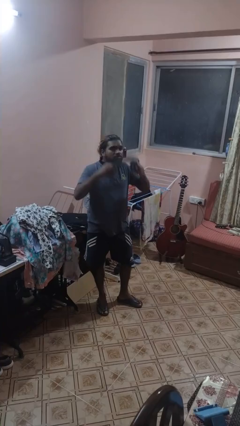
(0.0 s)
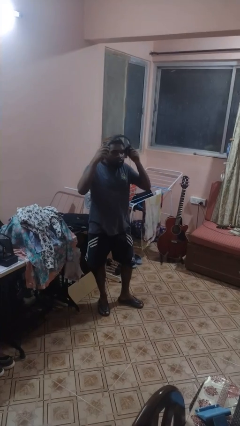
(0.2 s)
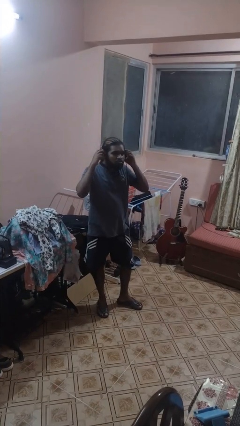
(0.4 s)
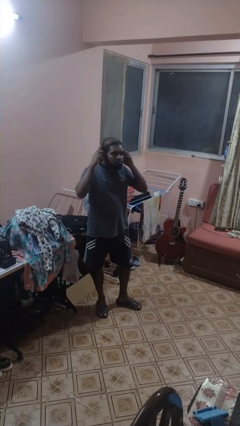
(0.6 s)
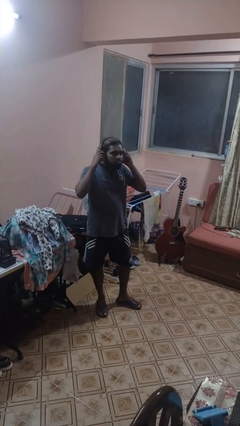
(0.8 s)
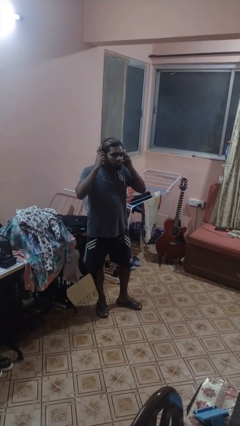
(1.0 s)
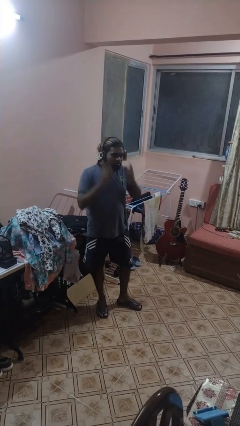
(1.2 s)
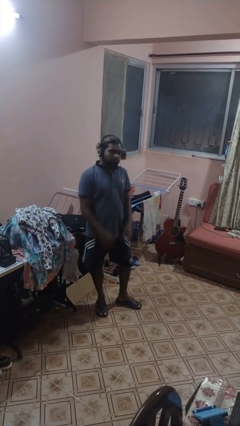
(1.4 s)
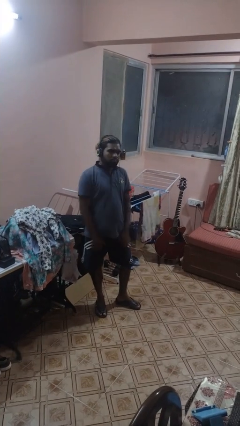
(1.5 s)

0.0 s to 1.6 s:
person puts on headphones

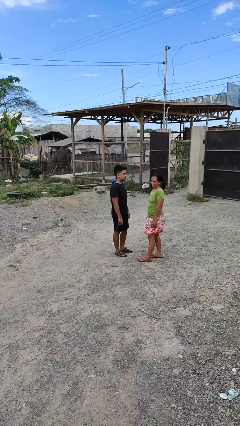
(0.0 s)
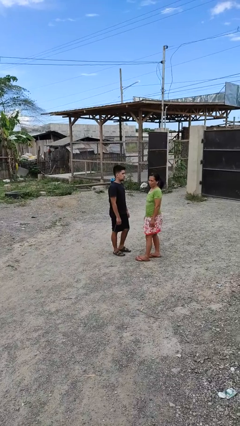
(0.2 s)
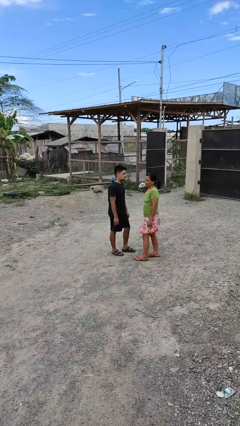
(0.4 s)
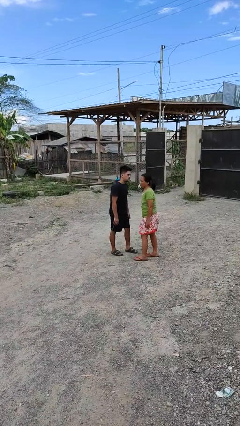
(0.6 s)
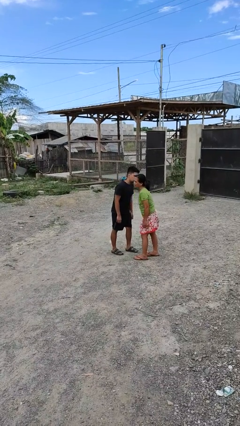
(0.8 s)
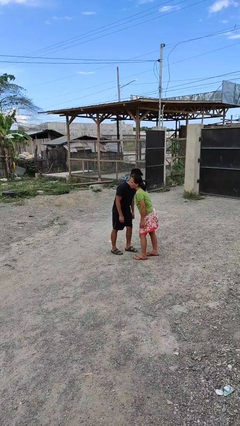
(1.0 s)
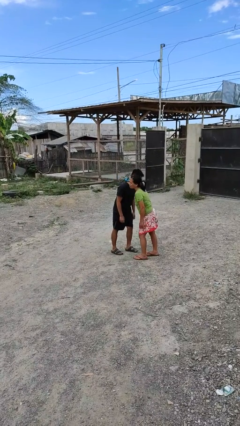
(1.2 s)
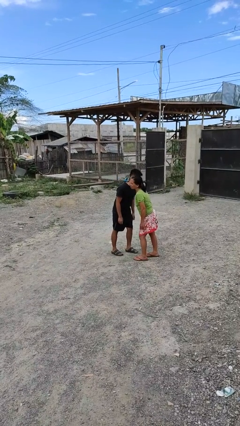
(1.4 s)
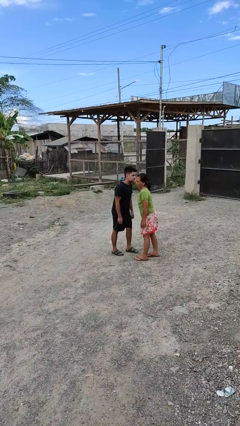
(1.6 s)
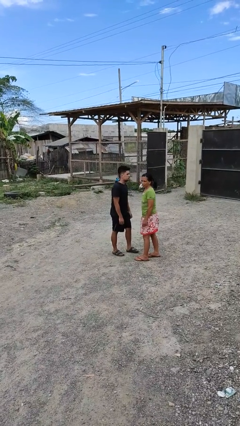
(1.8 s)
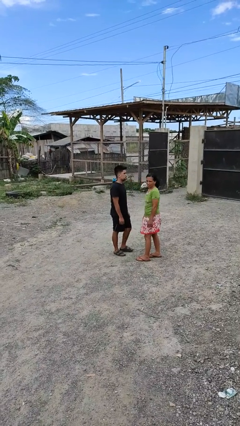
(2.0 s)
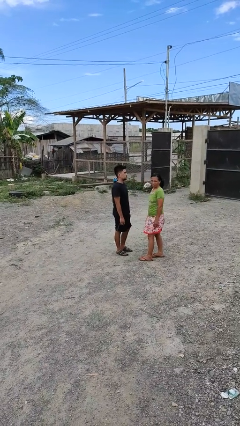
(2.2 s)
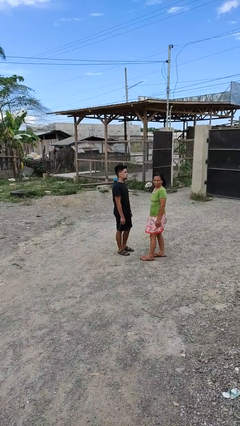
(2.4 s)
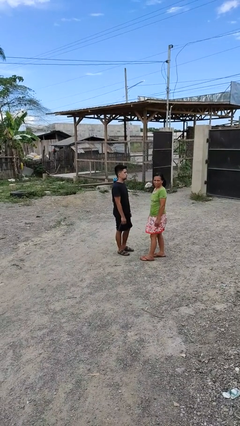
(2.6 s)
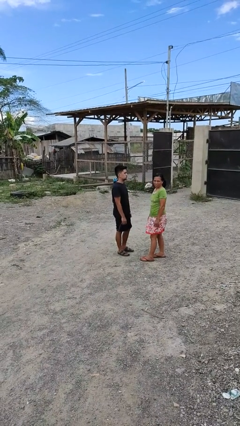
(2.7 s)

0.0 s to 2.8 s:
person kisses cheek of person

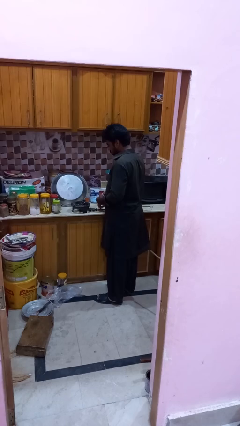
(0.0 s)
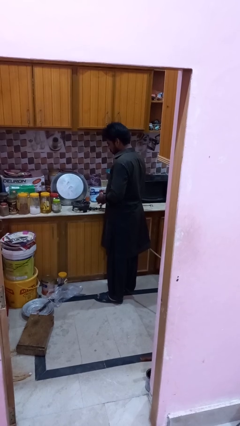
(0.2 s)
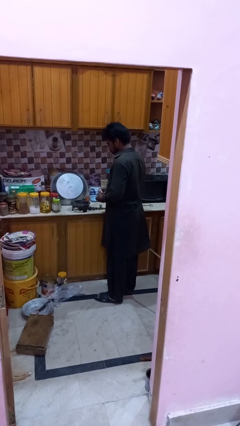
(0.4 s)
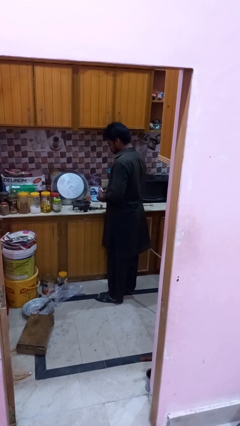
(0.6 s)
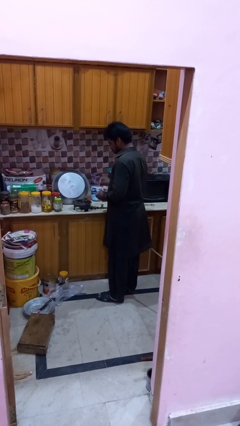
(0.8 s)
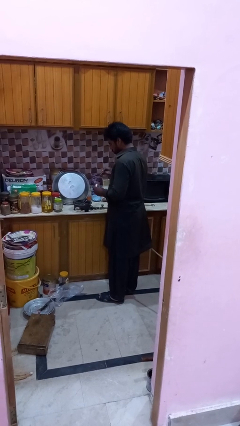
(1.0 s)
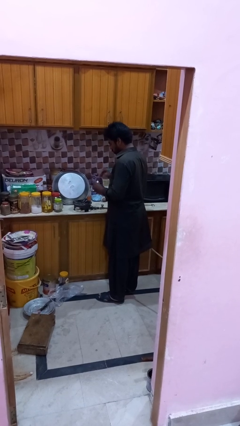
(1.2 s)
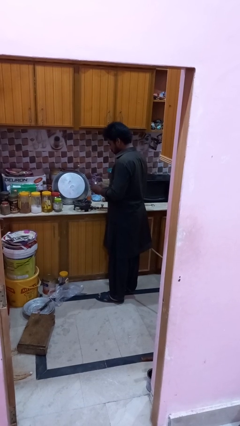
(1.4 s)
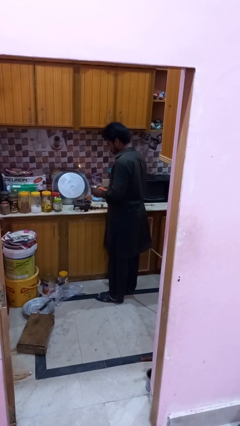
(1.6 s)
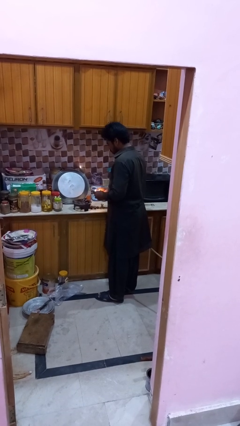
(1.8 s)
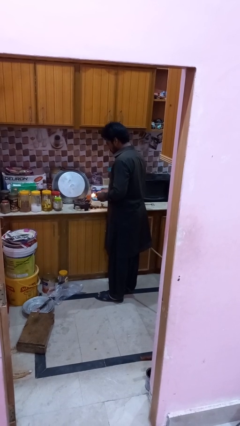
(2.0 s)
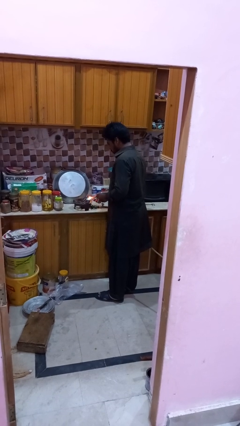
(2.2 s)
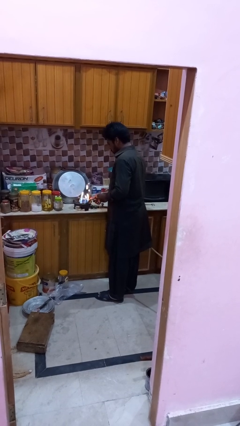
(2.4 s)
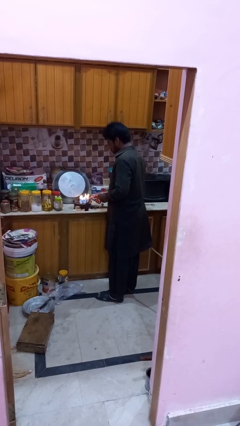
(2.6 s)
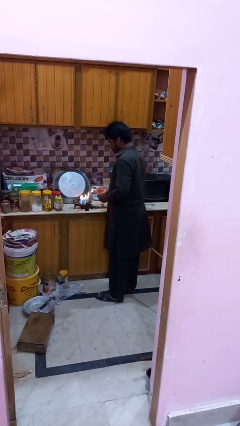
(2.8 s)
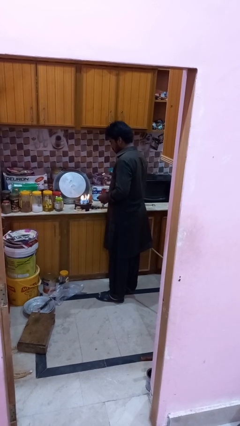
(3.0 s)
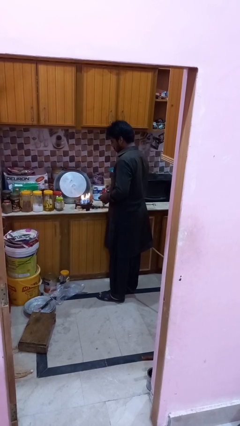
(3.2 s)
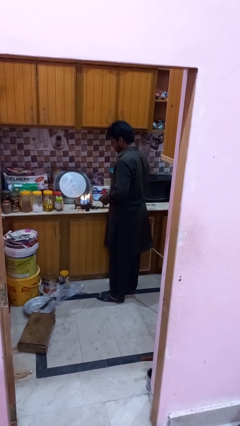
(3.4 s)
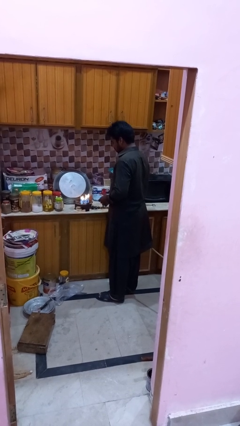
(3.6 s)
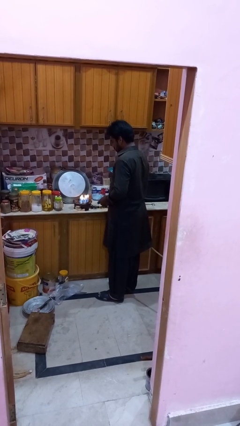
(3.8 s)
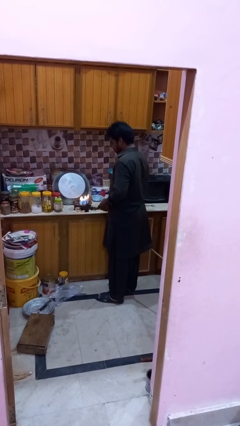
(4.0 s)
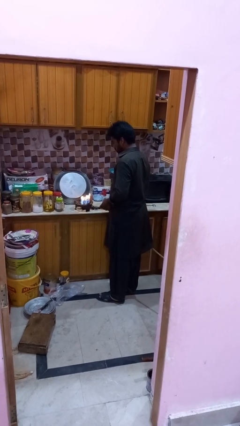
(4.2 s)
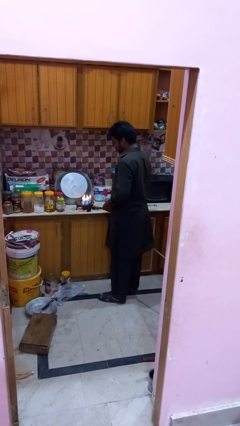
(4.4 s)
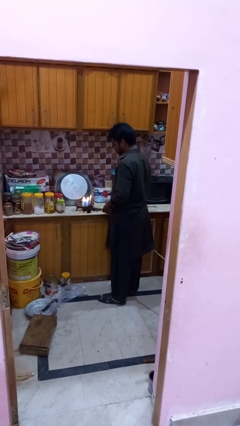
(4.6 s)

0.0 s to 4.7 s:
person turns on stovetop

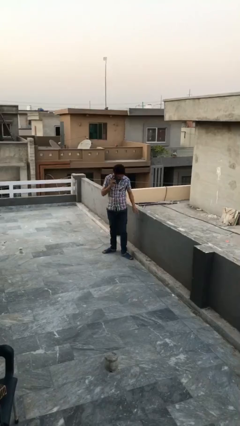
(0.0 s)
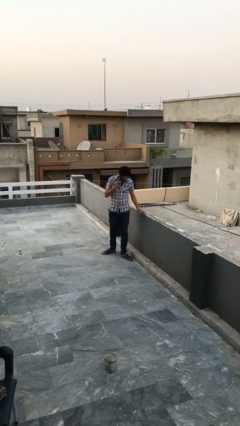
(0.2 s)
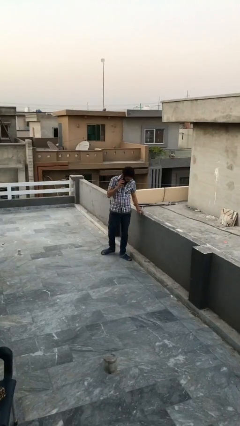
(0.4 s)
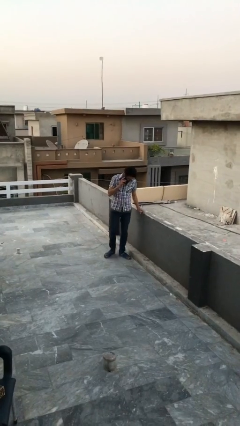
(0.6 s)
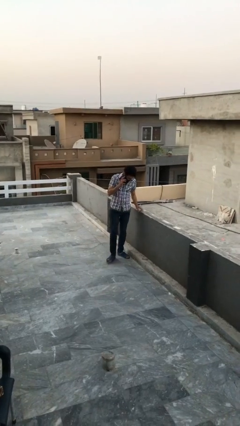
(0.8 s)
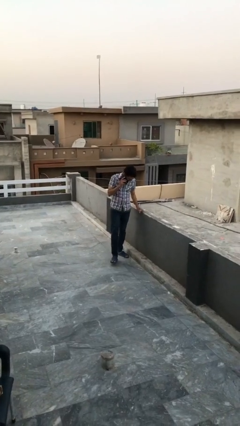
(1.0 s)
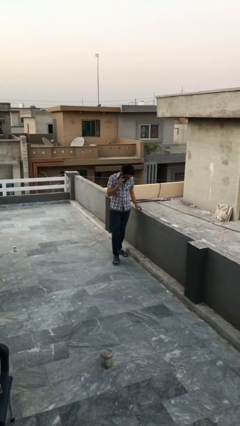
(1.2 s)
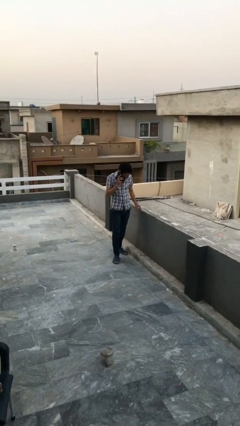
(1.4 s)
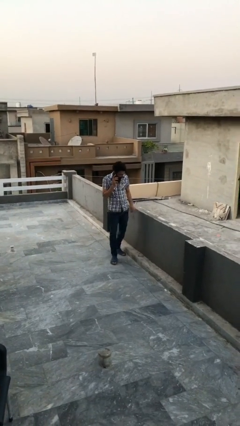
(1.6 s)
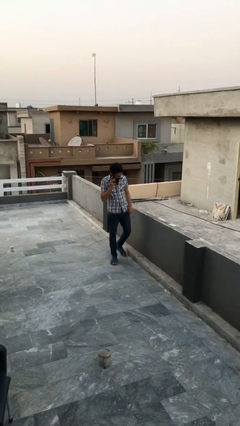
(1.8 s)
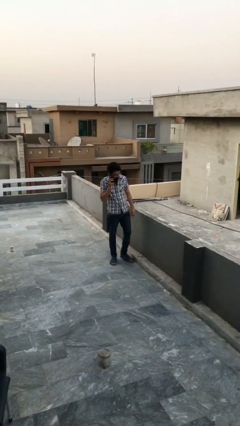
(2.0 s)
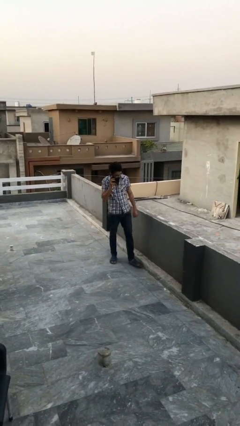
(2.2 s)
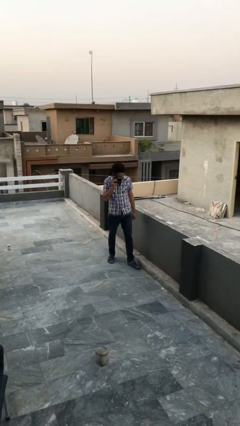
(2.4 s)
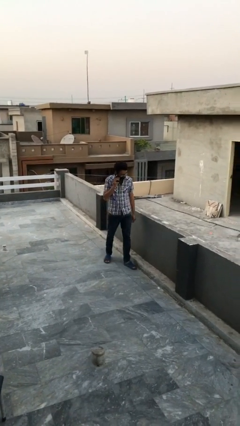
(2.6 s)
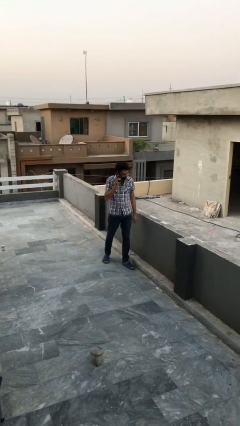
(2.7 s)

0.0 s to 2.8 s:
person talks on phone

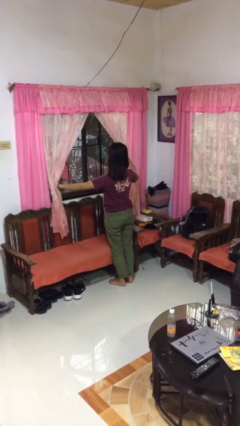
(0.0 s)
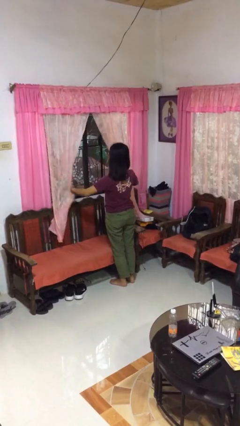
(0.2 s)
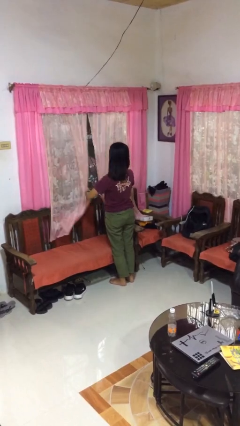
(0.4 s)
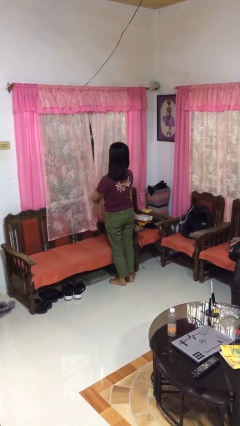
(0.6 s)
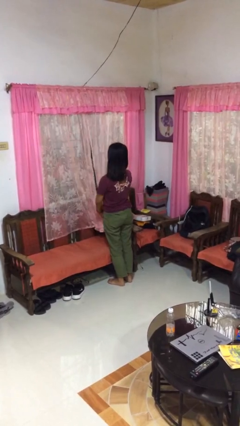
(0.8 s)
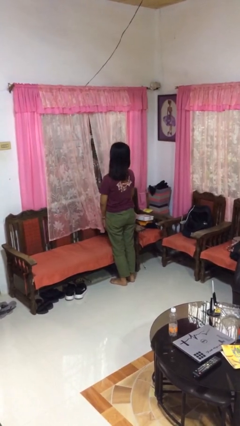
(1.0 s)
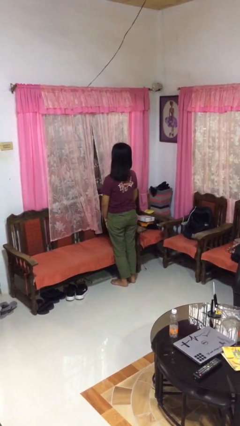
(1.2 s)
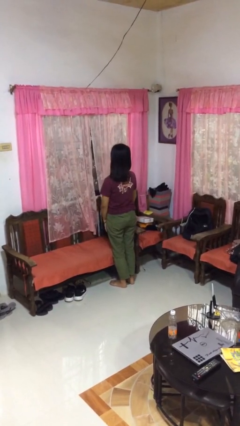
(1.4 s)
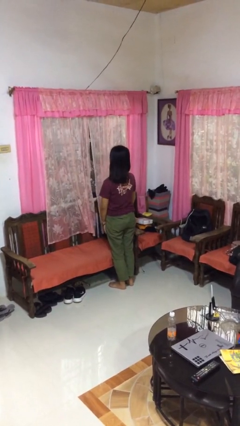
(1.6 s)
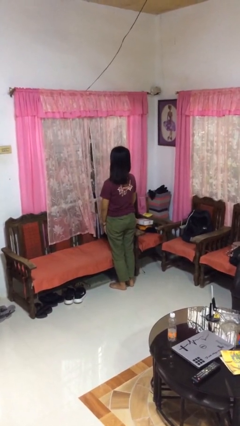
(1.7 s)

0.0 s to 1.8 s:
person closes curtains

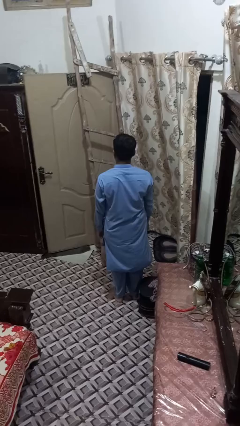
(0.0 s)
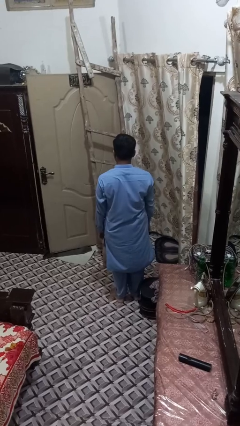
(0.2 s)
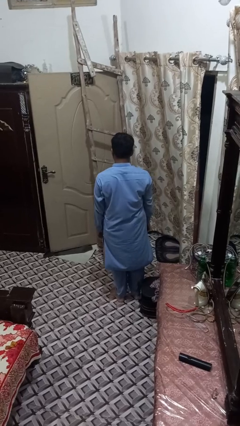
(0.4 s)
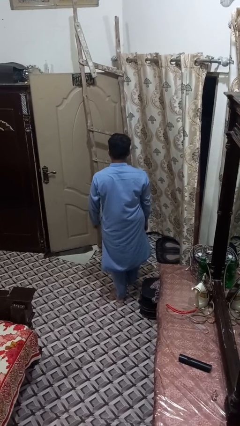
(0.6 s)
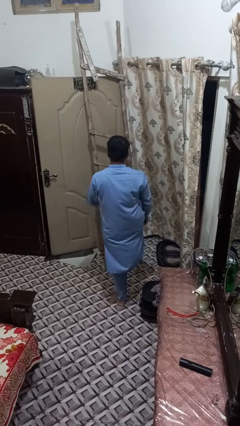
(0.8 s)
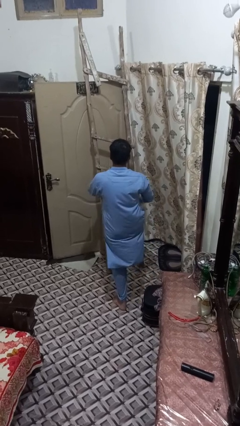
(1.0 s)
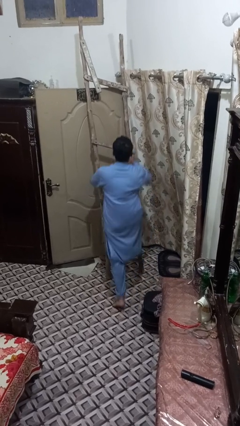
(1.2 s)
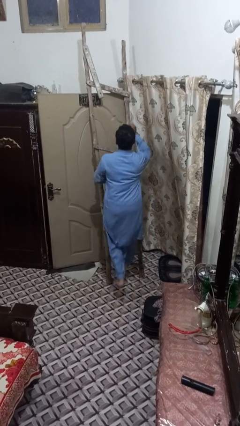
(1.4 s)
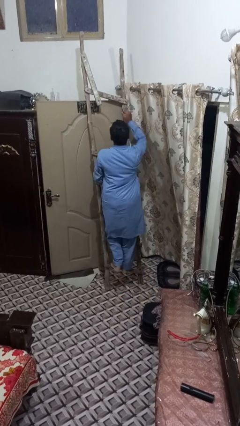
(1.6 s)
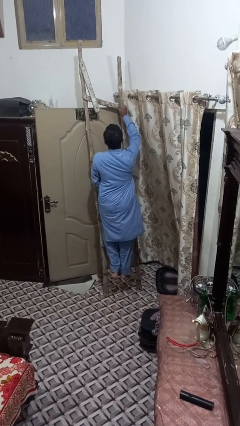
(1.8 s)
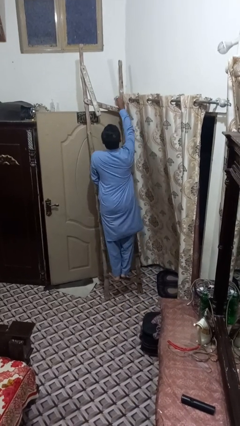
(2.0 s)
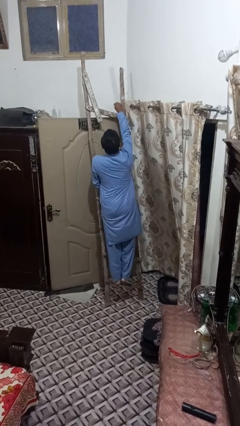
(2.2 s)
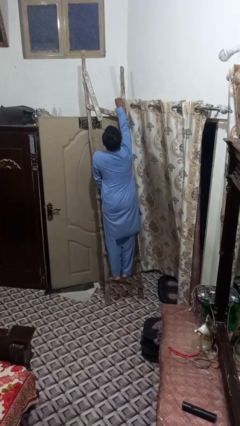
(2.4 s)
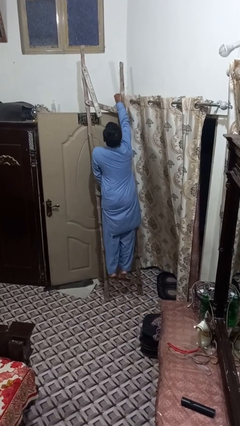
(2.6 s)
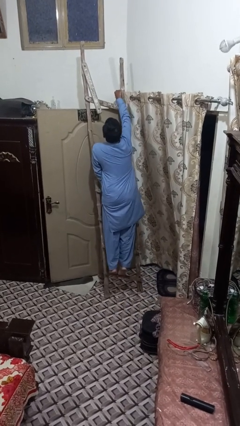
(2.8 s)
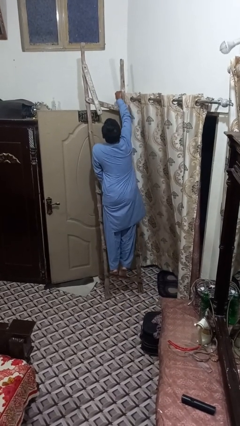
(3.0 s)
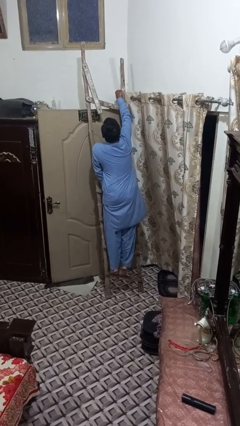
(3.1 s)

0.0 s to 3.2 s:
person climbs up ladder
